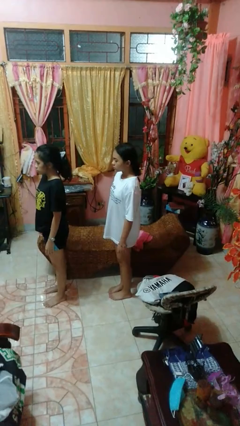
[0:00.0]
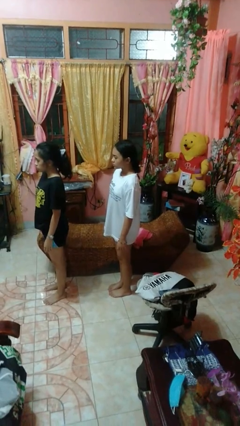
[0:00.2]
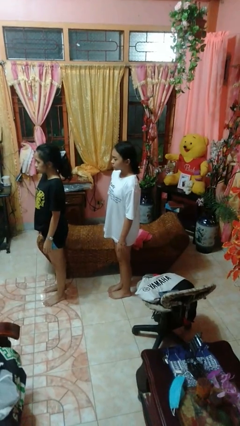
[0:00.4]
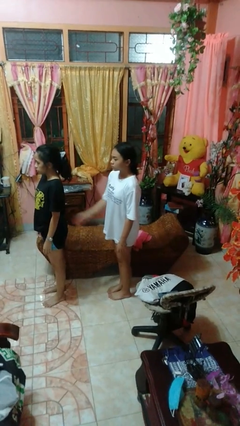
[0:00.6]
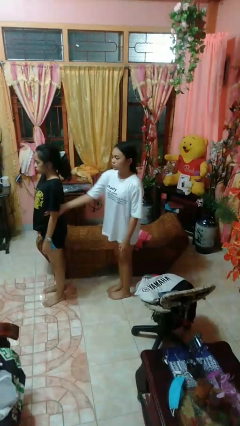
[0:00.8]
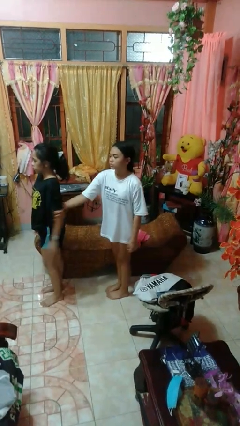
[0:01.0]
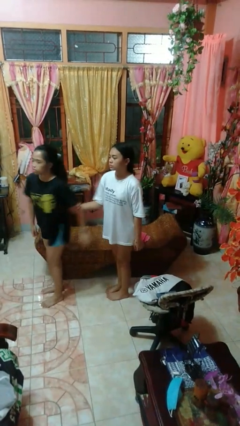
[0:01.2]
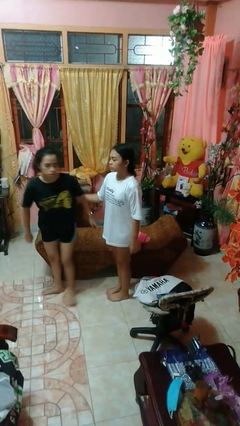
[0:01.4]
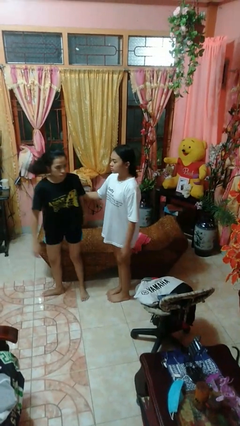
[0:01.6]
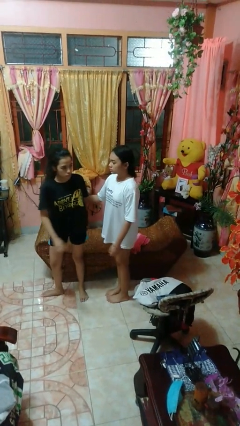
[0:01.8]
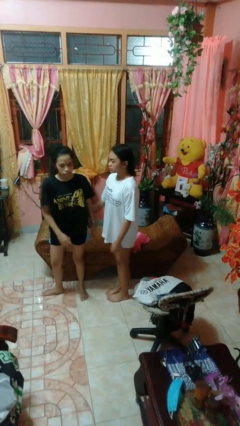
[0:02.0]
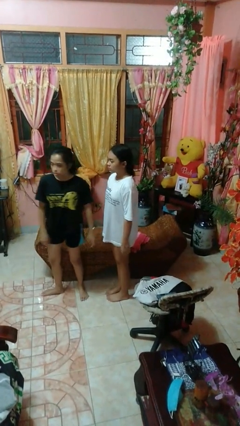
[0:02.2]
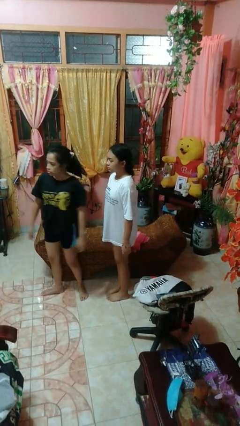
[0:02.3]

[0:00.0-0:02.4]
person grabs person by bicep

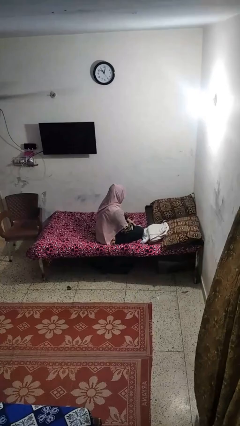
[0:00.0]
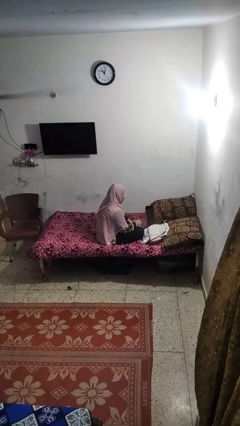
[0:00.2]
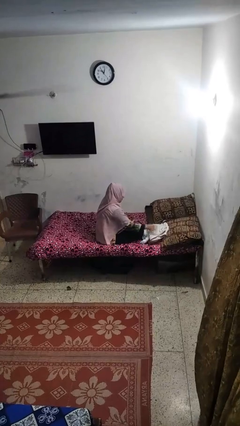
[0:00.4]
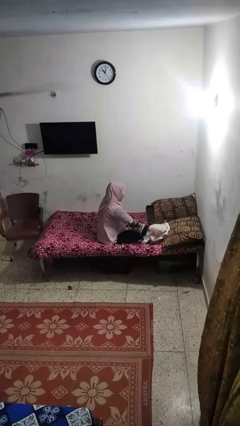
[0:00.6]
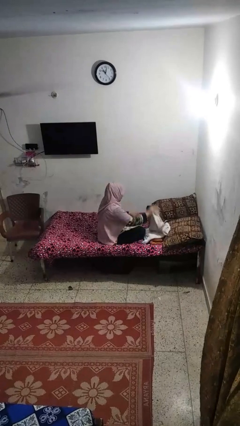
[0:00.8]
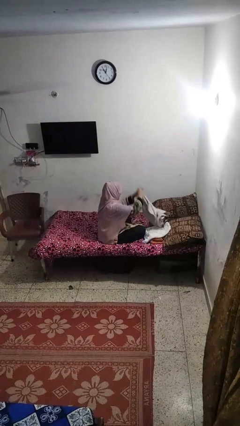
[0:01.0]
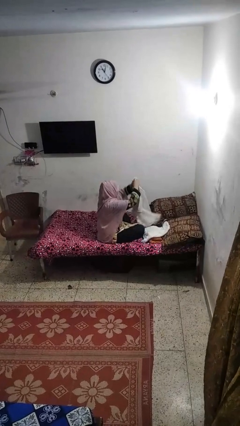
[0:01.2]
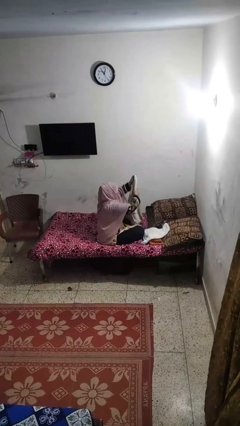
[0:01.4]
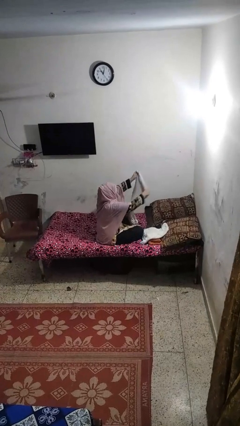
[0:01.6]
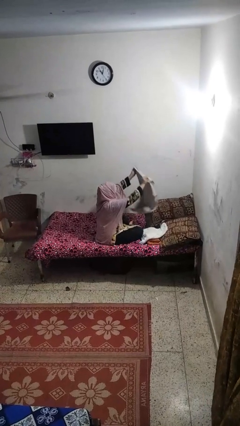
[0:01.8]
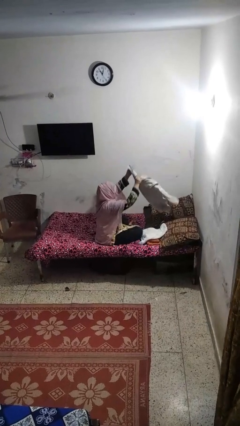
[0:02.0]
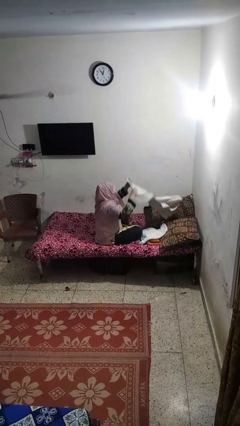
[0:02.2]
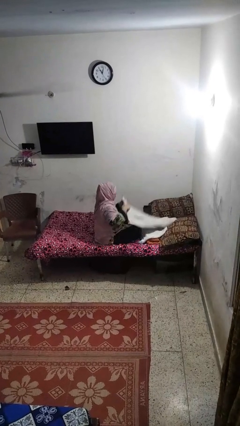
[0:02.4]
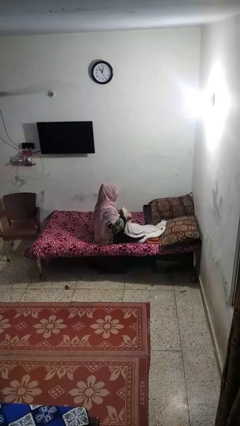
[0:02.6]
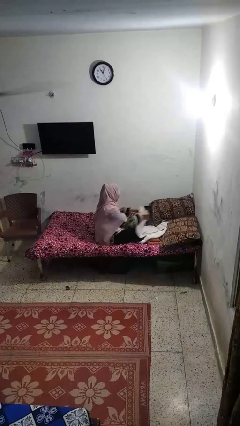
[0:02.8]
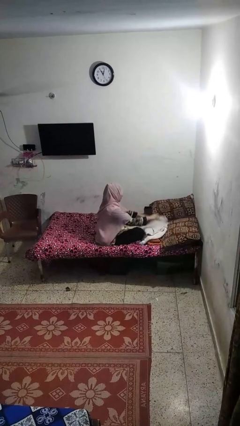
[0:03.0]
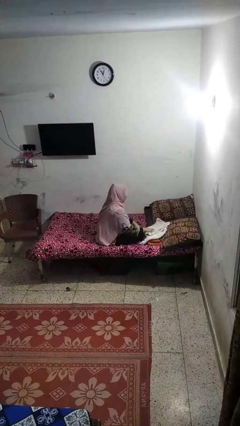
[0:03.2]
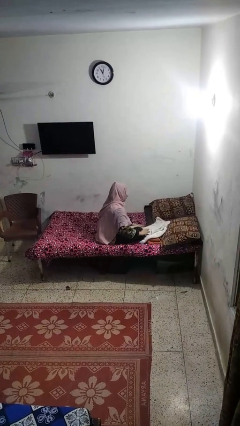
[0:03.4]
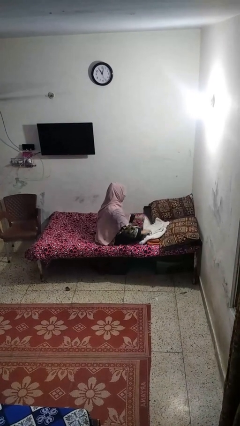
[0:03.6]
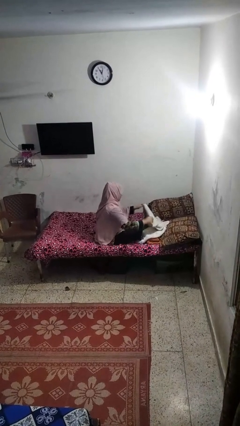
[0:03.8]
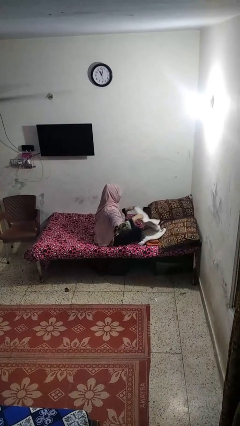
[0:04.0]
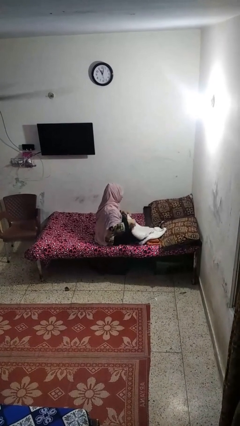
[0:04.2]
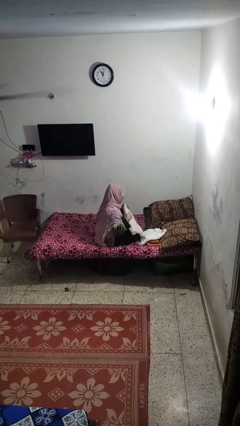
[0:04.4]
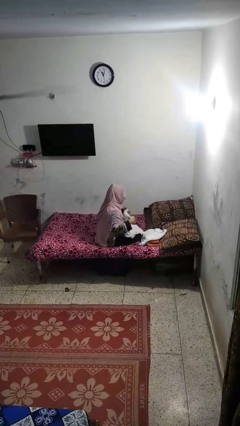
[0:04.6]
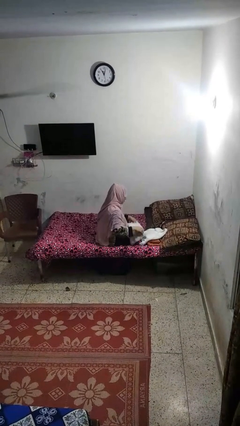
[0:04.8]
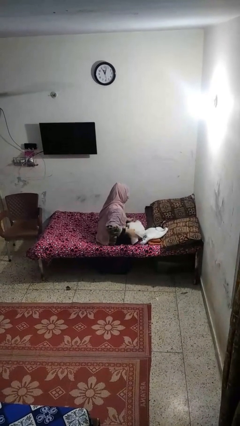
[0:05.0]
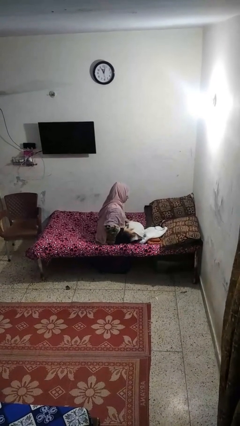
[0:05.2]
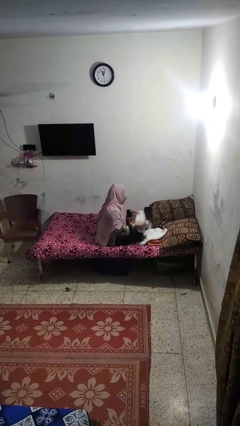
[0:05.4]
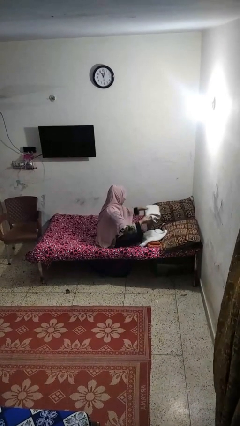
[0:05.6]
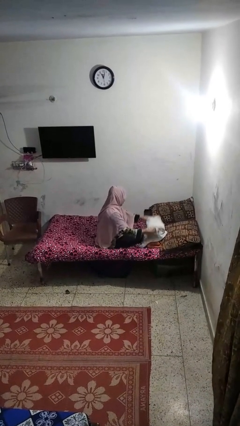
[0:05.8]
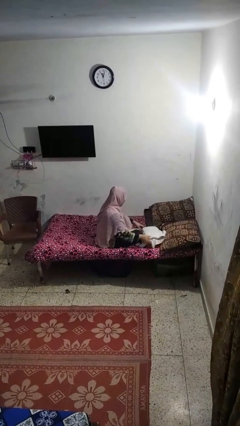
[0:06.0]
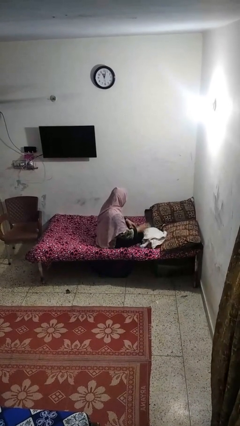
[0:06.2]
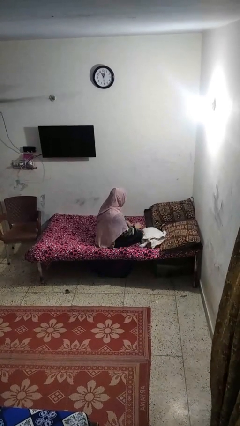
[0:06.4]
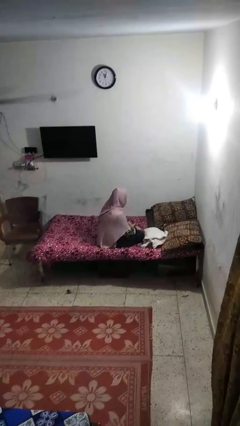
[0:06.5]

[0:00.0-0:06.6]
person folds towel

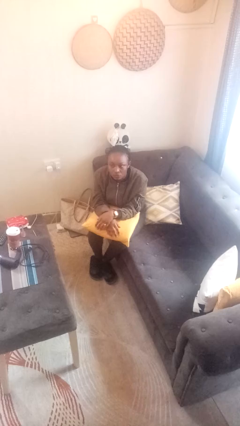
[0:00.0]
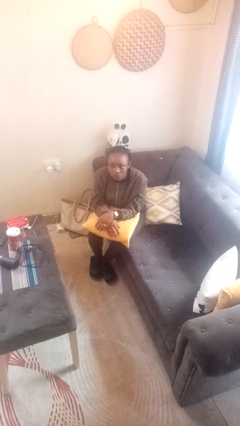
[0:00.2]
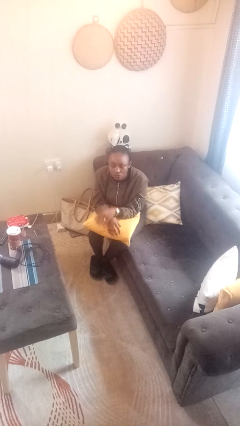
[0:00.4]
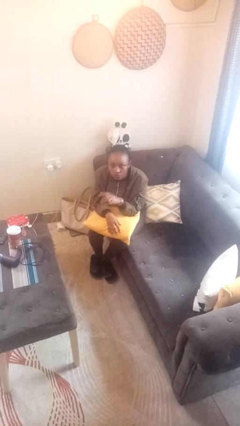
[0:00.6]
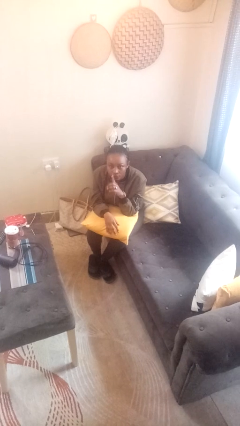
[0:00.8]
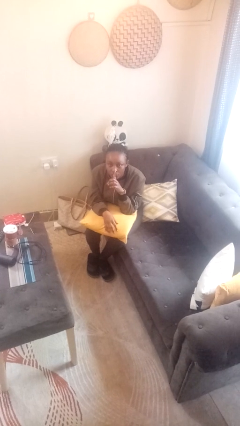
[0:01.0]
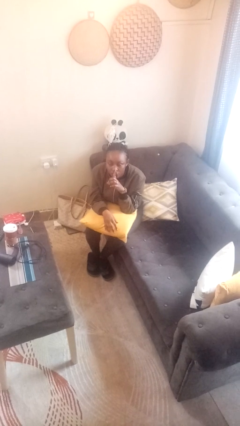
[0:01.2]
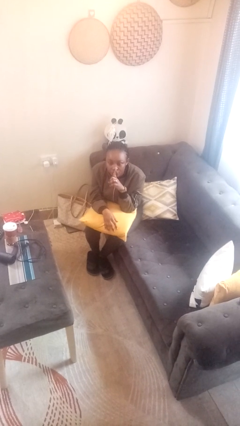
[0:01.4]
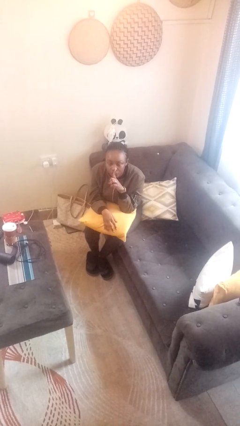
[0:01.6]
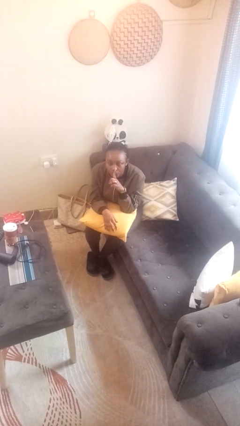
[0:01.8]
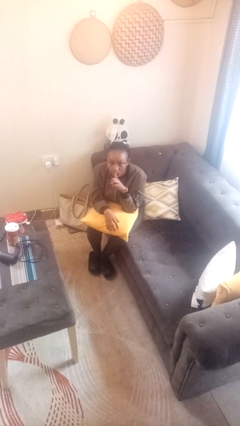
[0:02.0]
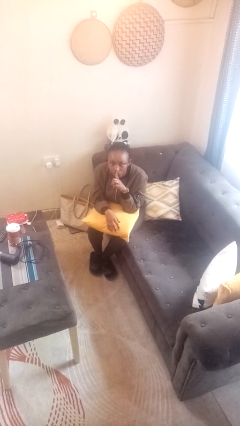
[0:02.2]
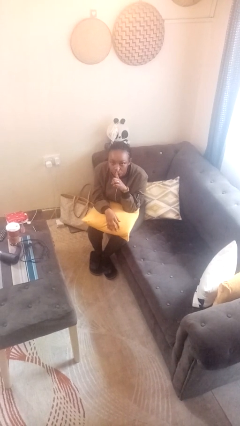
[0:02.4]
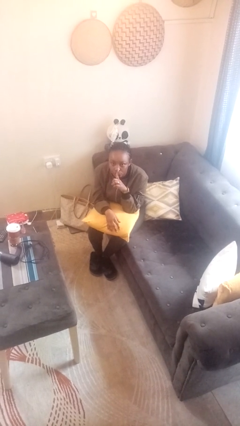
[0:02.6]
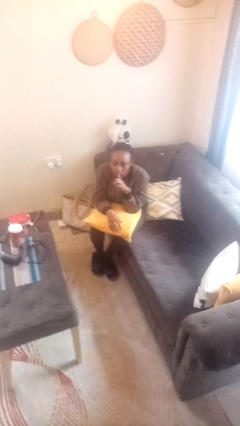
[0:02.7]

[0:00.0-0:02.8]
person gestures be quiet

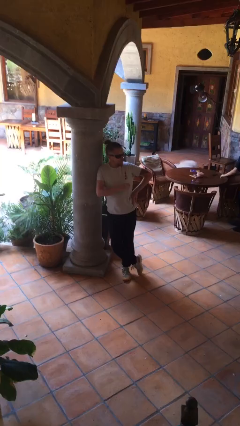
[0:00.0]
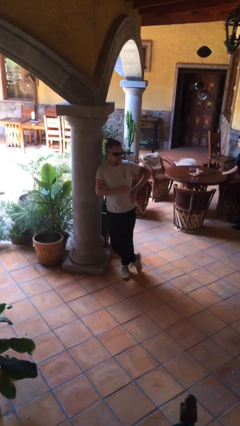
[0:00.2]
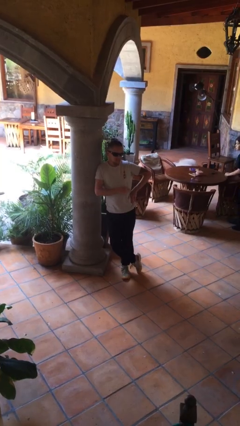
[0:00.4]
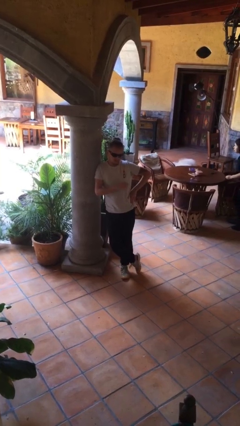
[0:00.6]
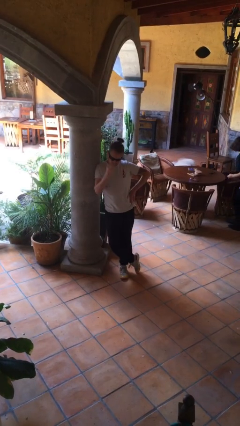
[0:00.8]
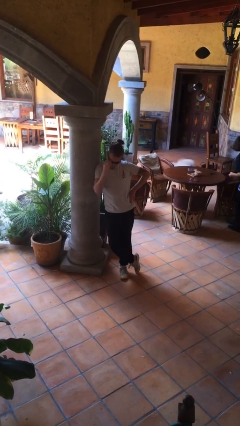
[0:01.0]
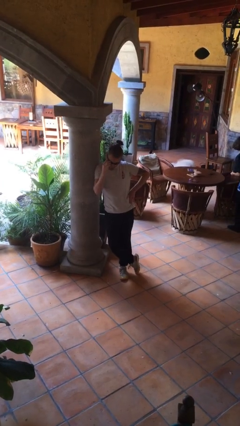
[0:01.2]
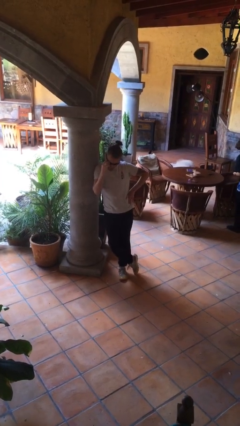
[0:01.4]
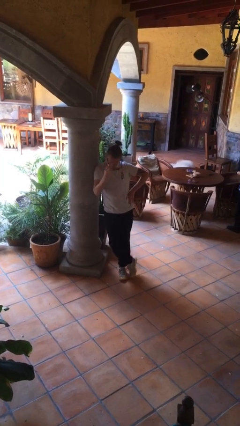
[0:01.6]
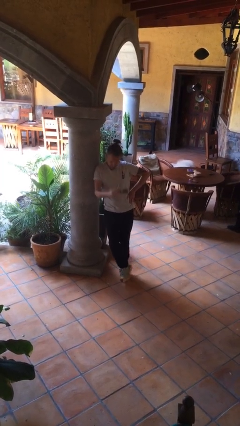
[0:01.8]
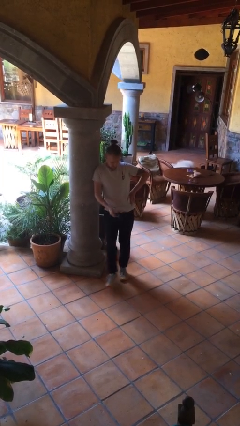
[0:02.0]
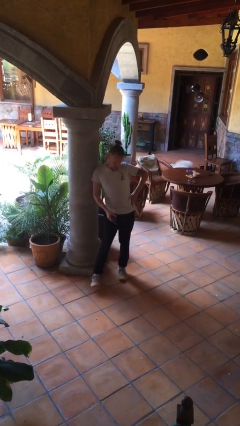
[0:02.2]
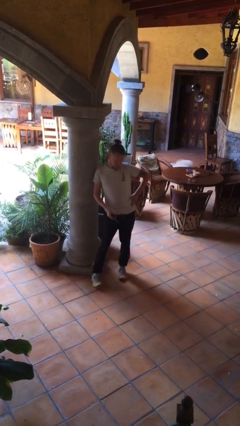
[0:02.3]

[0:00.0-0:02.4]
person takes off sunglasses

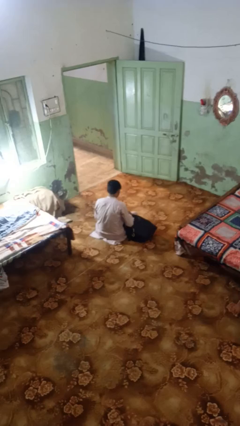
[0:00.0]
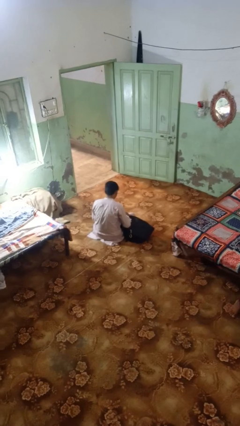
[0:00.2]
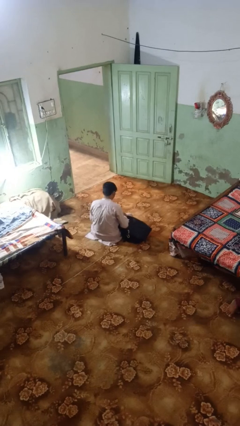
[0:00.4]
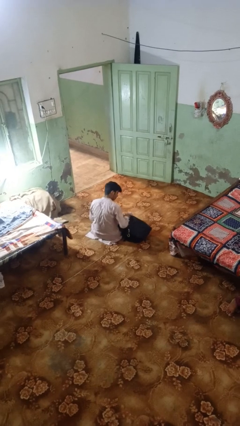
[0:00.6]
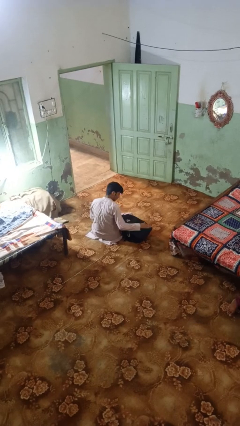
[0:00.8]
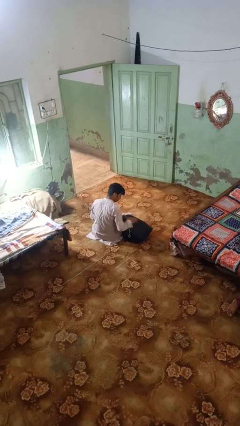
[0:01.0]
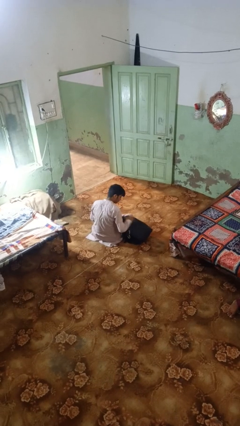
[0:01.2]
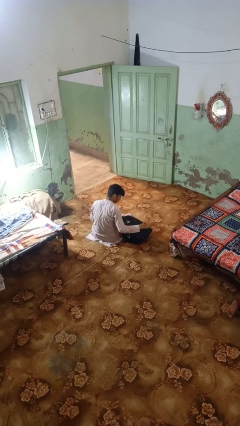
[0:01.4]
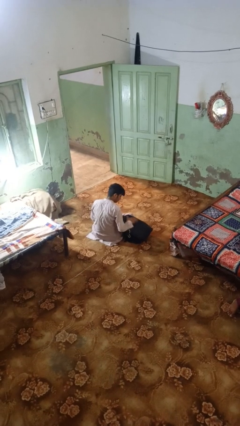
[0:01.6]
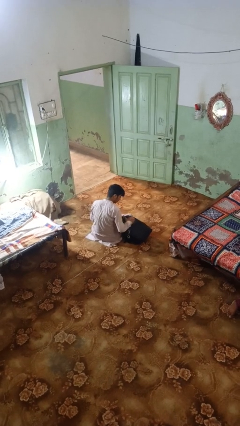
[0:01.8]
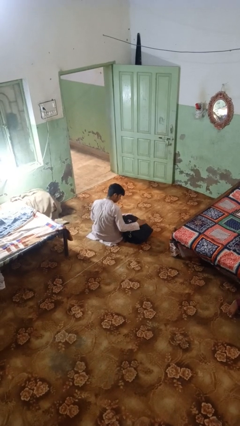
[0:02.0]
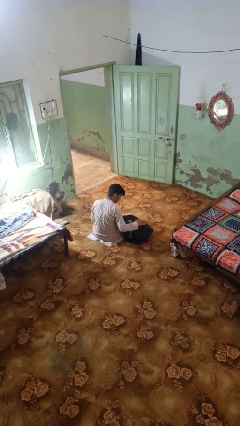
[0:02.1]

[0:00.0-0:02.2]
person waves hand over object

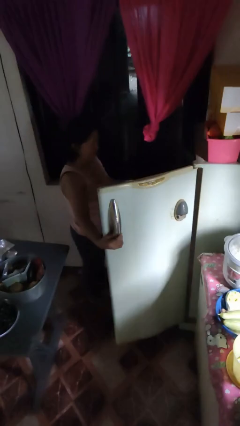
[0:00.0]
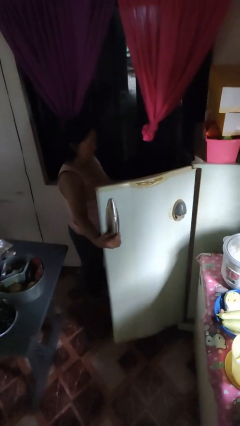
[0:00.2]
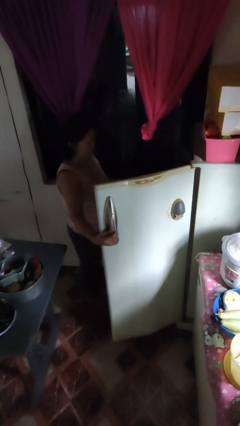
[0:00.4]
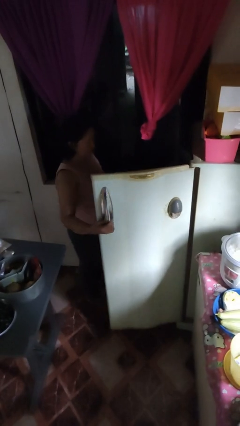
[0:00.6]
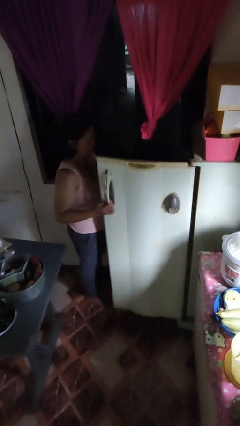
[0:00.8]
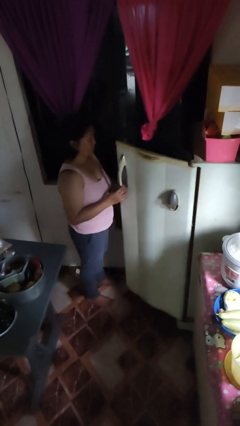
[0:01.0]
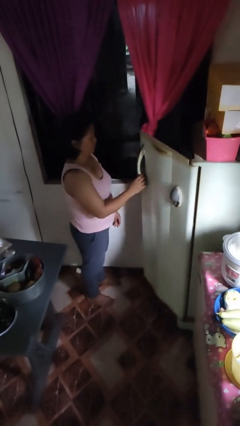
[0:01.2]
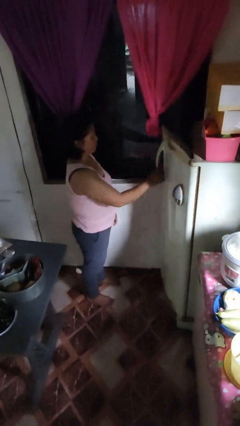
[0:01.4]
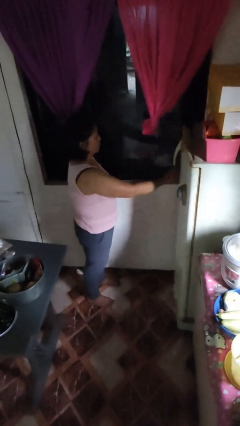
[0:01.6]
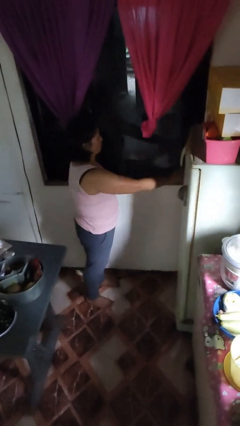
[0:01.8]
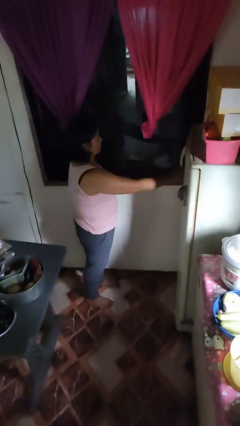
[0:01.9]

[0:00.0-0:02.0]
person closes refrigerator
